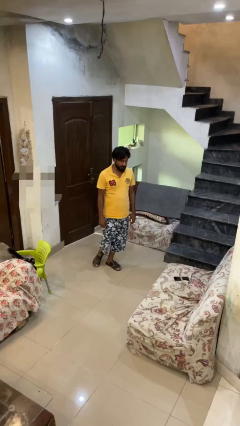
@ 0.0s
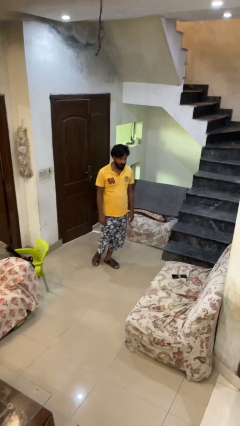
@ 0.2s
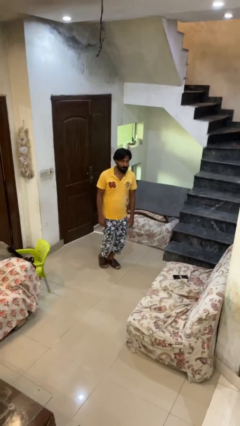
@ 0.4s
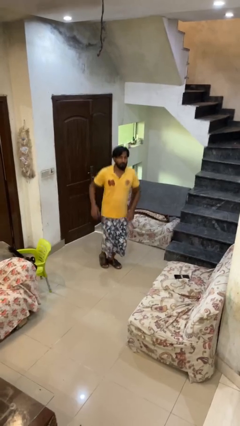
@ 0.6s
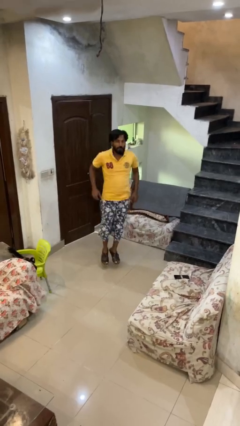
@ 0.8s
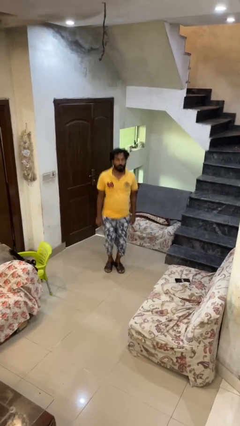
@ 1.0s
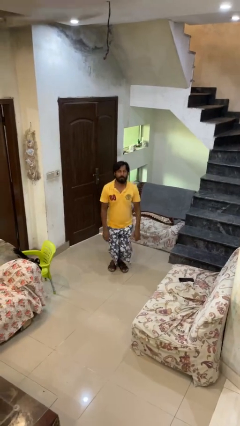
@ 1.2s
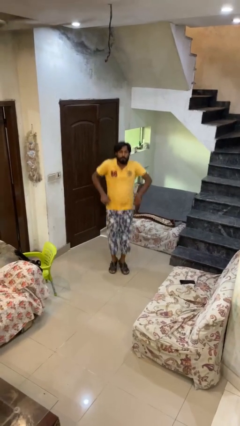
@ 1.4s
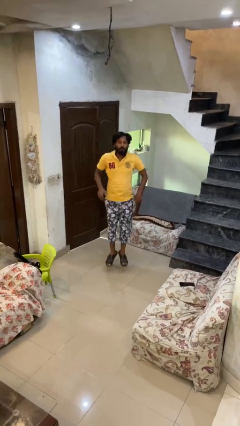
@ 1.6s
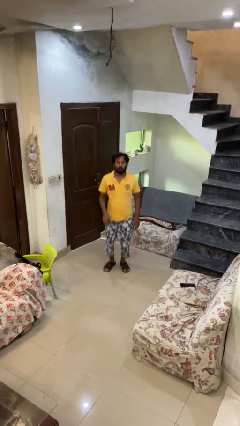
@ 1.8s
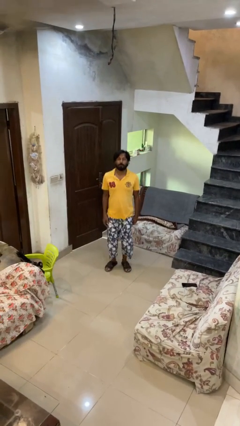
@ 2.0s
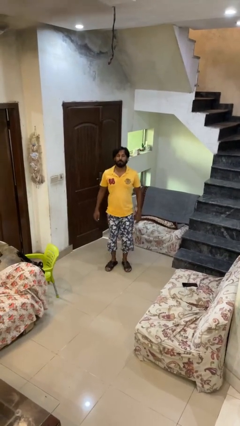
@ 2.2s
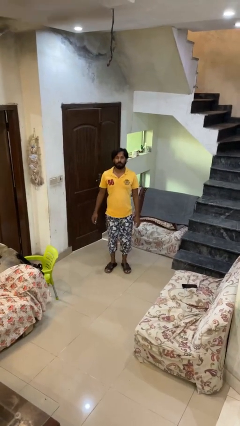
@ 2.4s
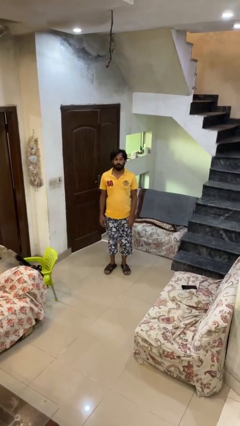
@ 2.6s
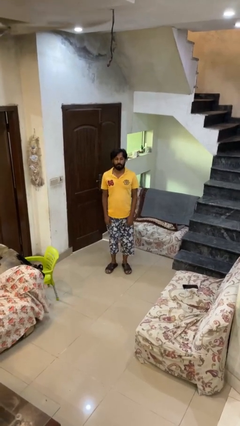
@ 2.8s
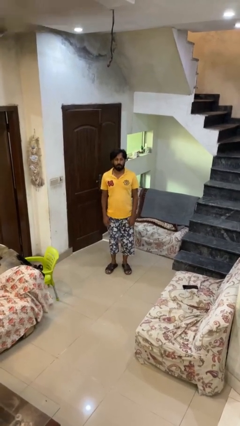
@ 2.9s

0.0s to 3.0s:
person jumps

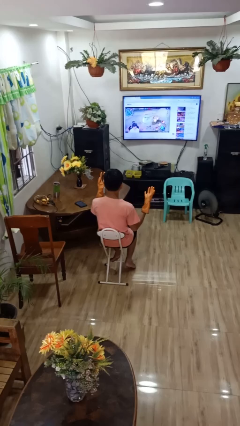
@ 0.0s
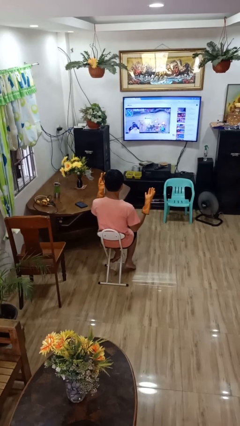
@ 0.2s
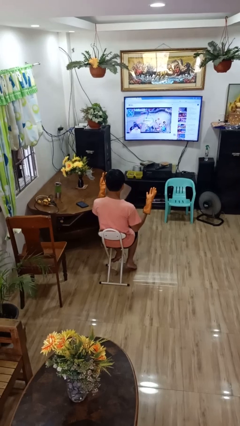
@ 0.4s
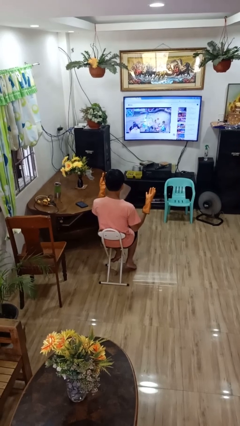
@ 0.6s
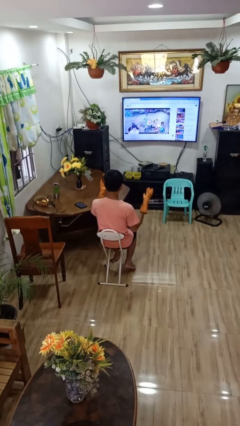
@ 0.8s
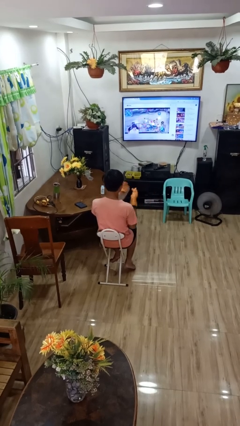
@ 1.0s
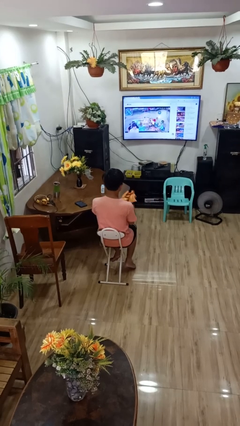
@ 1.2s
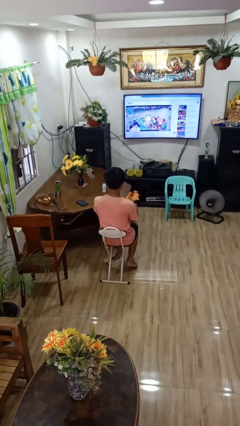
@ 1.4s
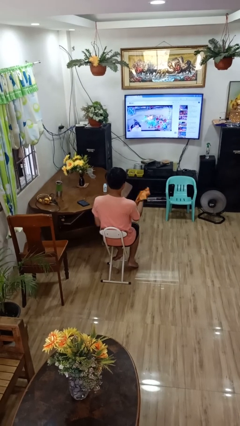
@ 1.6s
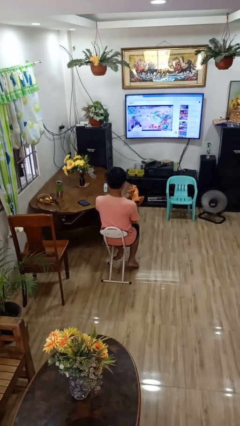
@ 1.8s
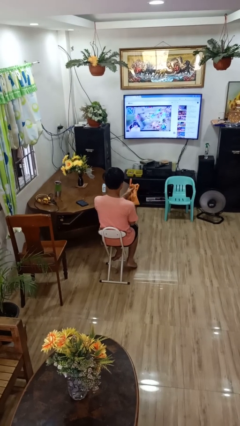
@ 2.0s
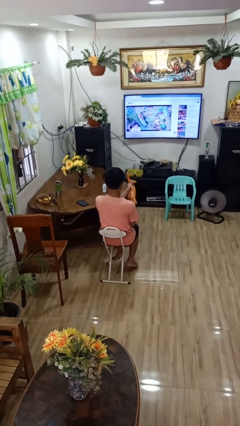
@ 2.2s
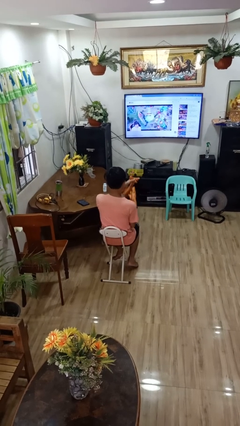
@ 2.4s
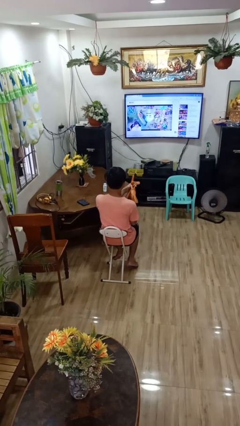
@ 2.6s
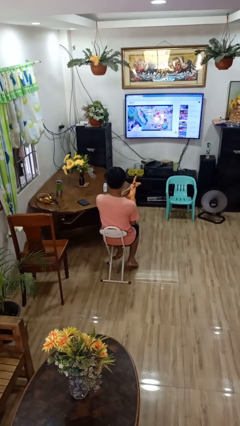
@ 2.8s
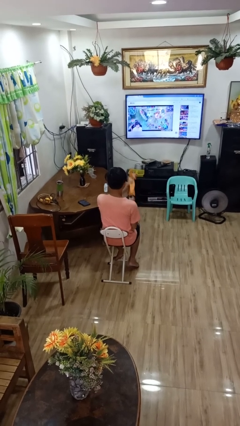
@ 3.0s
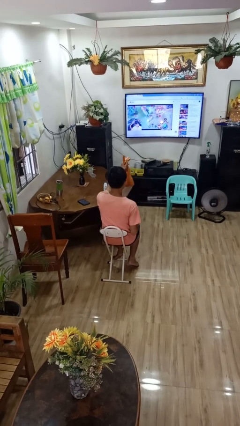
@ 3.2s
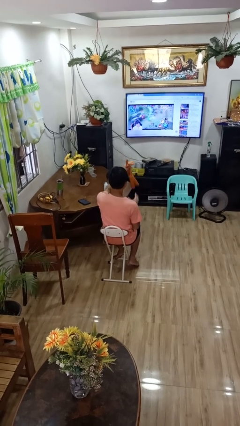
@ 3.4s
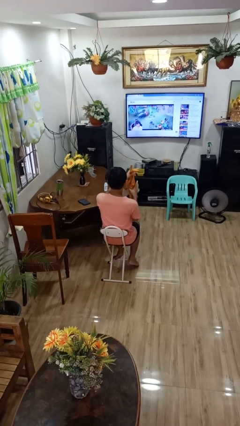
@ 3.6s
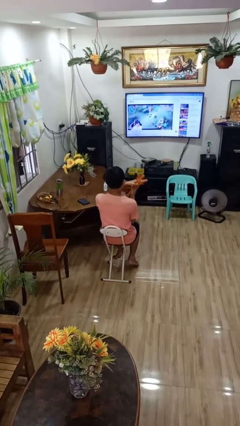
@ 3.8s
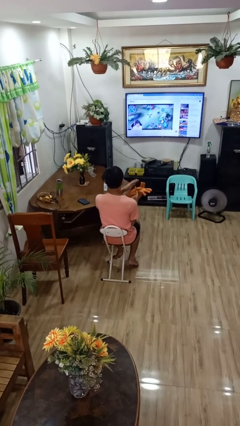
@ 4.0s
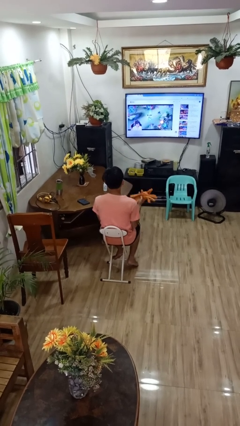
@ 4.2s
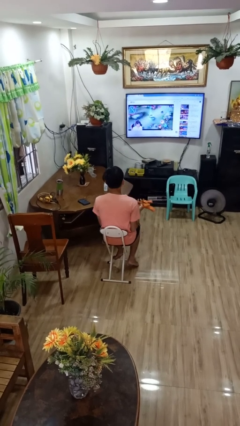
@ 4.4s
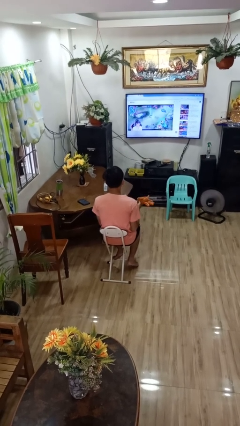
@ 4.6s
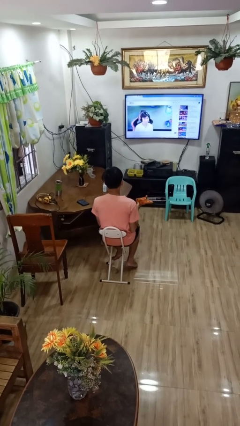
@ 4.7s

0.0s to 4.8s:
person takes off gloves

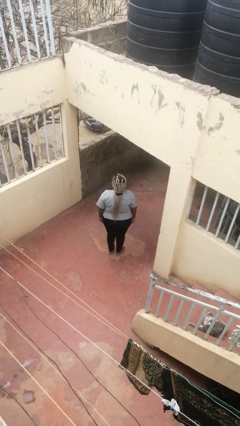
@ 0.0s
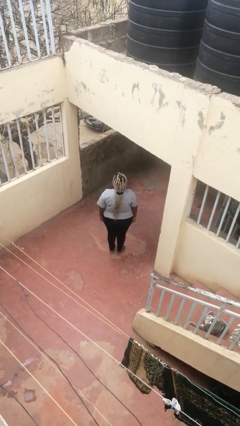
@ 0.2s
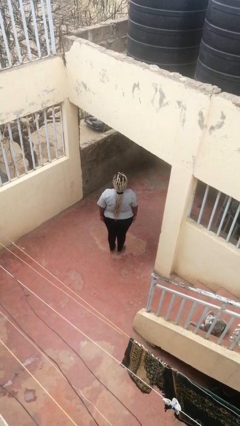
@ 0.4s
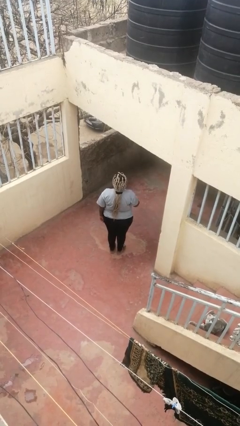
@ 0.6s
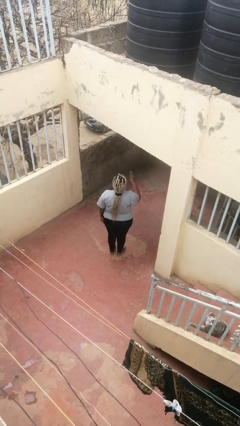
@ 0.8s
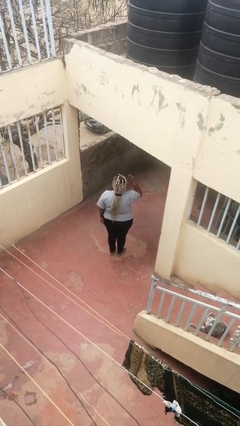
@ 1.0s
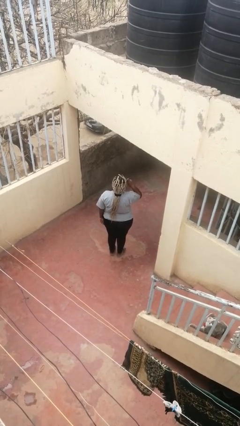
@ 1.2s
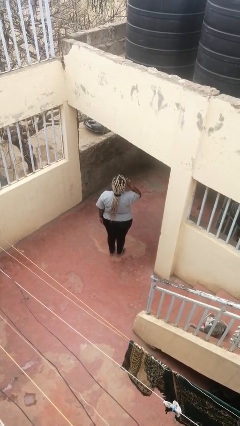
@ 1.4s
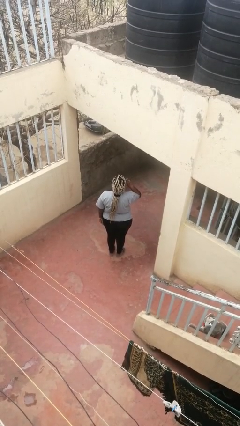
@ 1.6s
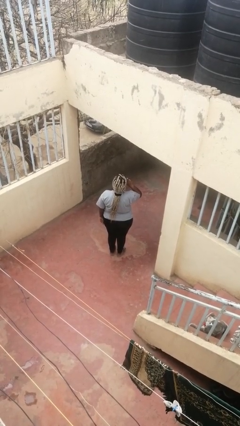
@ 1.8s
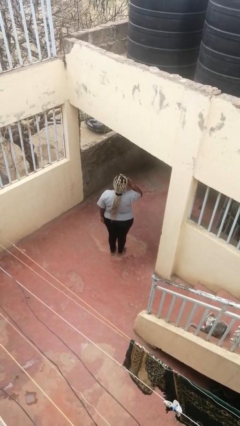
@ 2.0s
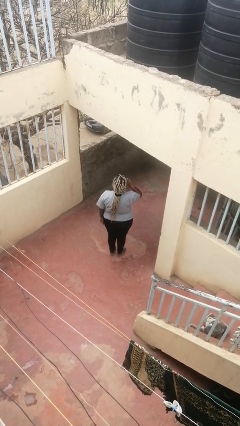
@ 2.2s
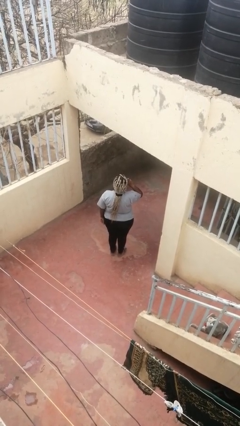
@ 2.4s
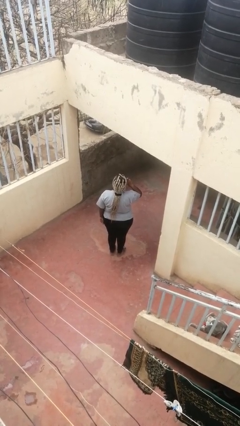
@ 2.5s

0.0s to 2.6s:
person salutes

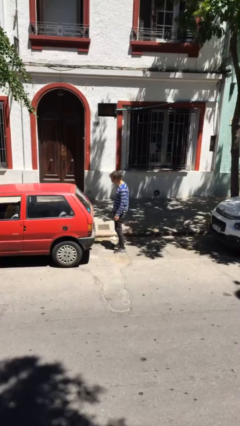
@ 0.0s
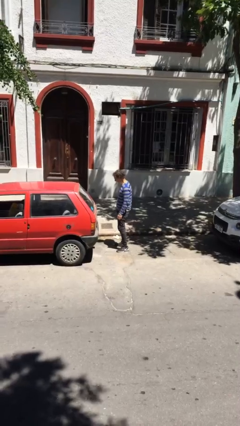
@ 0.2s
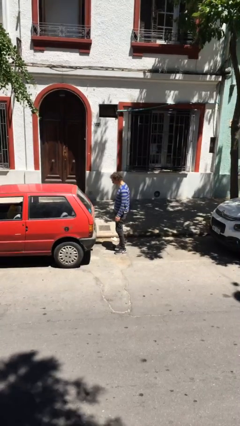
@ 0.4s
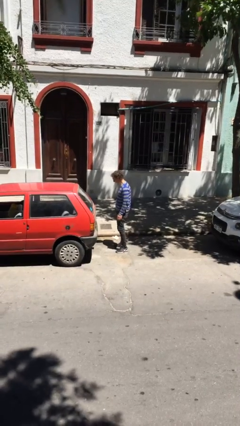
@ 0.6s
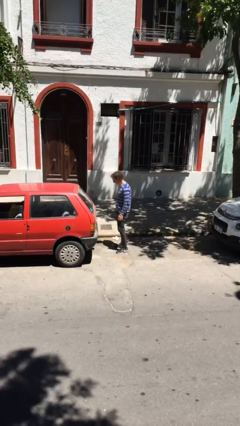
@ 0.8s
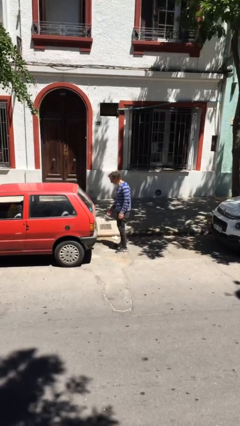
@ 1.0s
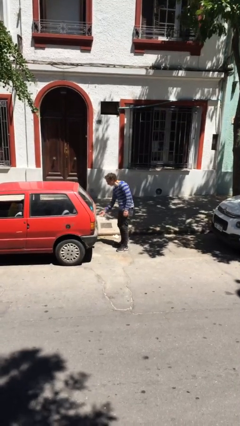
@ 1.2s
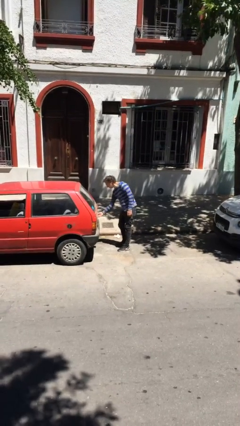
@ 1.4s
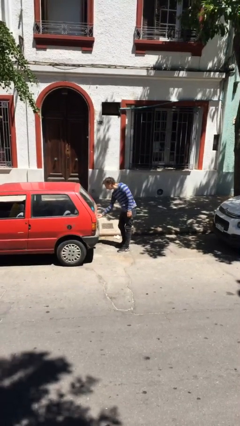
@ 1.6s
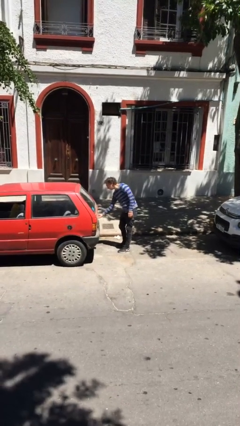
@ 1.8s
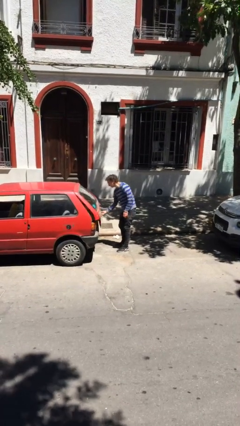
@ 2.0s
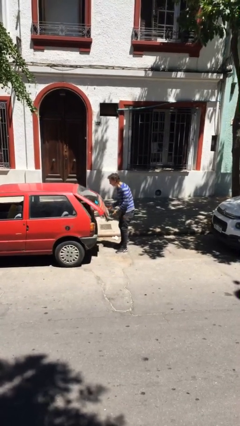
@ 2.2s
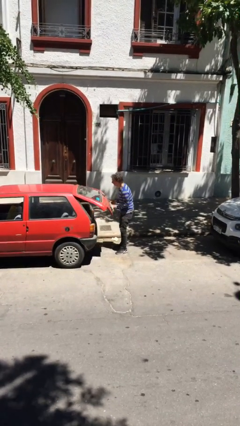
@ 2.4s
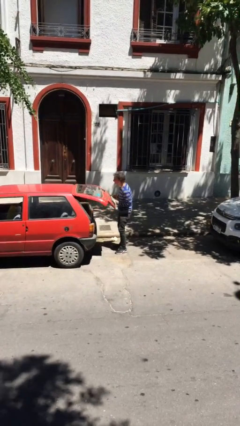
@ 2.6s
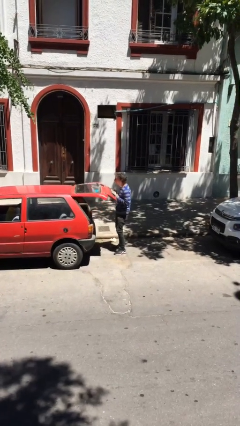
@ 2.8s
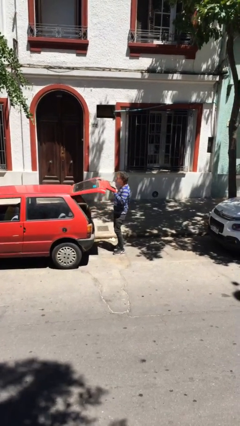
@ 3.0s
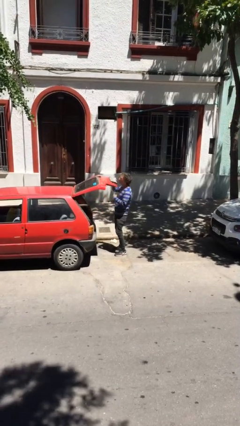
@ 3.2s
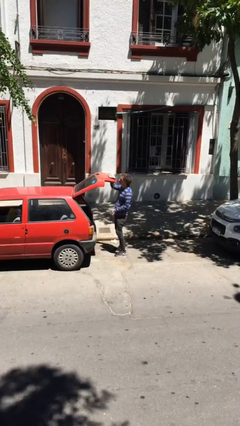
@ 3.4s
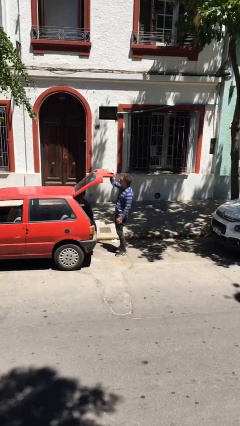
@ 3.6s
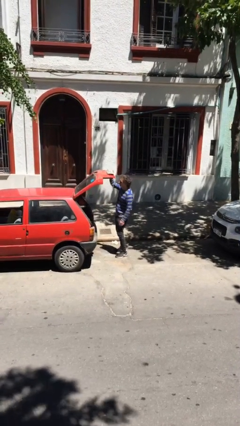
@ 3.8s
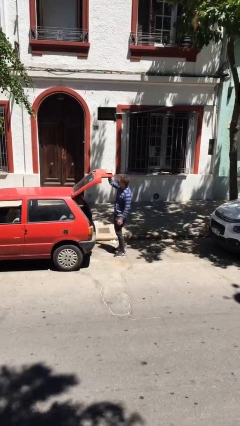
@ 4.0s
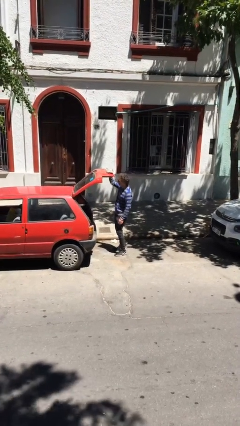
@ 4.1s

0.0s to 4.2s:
person opens car trunk

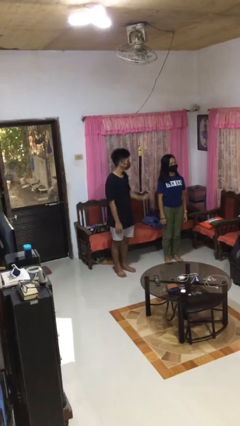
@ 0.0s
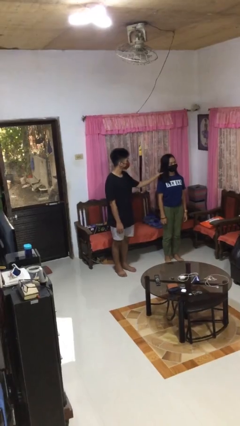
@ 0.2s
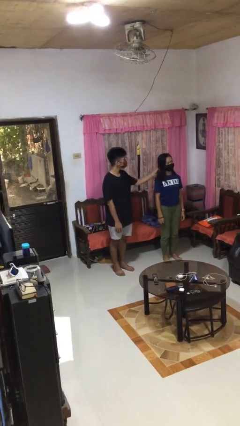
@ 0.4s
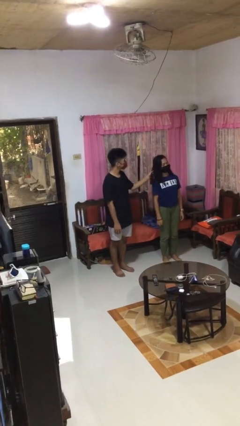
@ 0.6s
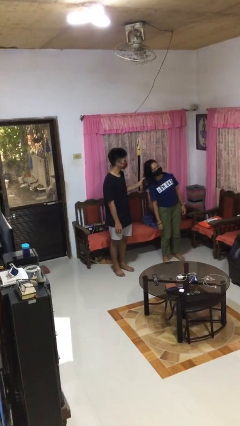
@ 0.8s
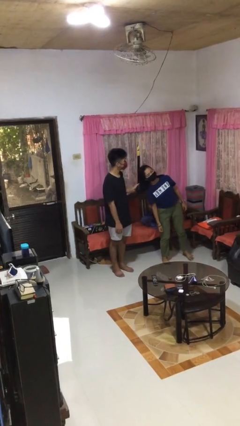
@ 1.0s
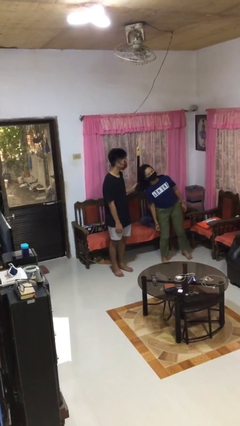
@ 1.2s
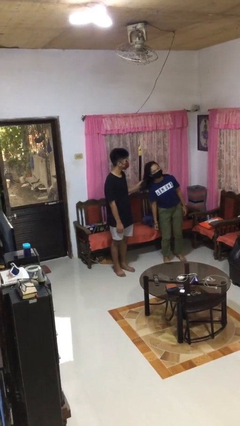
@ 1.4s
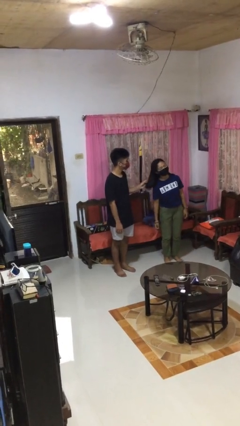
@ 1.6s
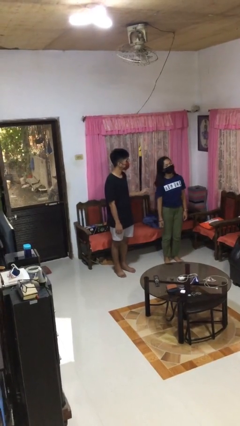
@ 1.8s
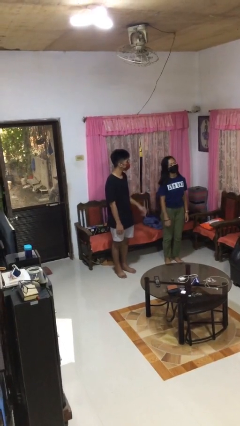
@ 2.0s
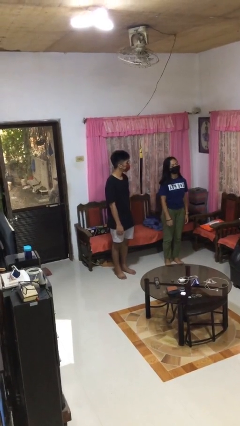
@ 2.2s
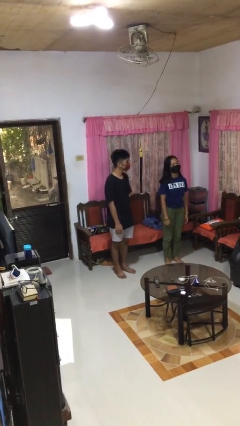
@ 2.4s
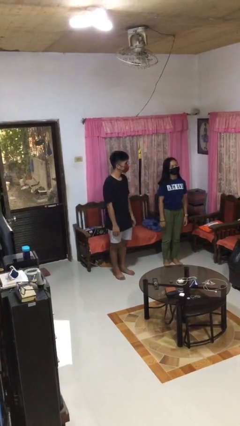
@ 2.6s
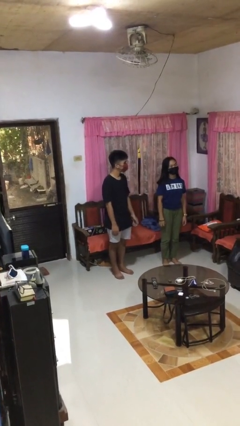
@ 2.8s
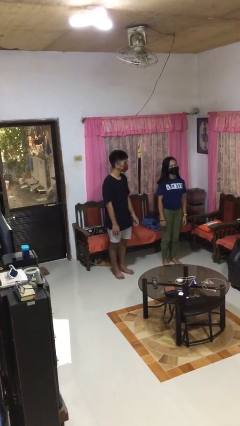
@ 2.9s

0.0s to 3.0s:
person grabs person by hair
